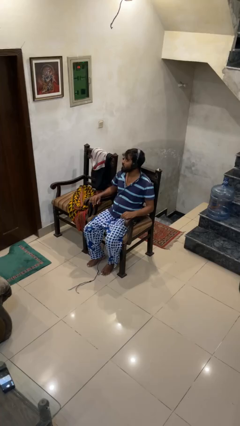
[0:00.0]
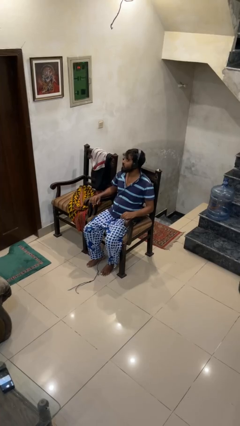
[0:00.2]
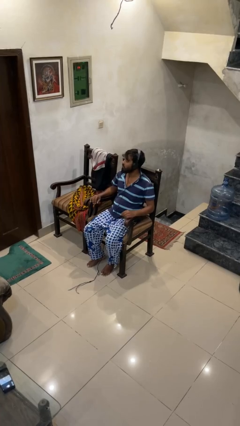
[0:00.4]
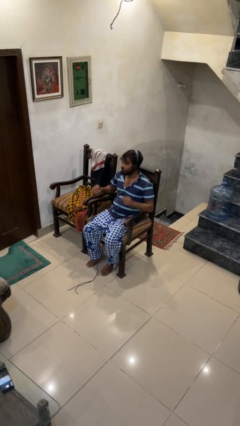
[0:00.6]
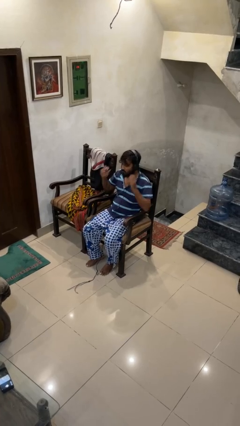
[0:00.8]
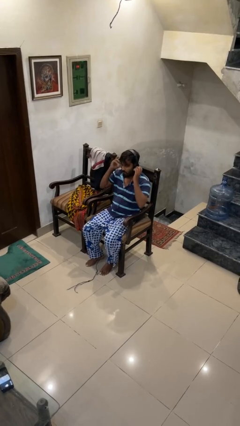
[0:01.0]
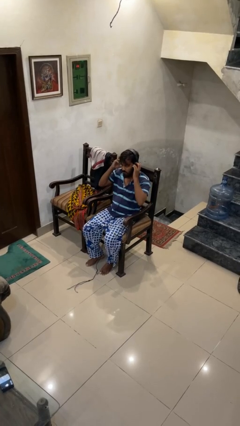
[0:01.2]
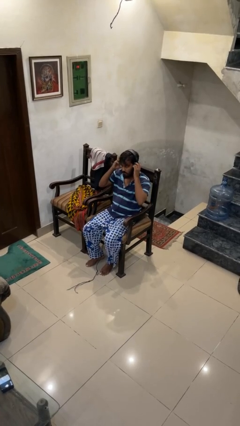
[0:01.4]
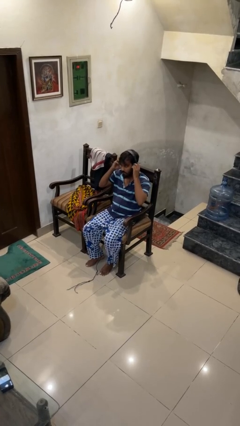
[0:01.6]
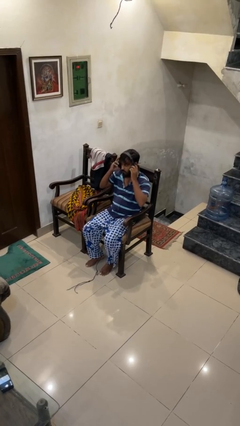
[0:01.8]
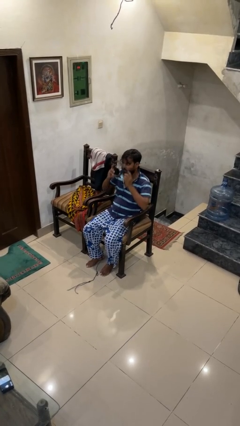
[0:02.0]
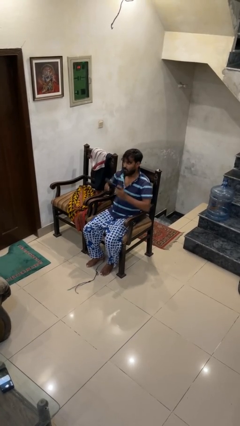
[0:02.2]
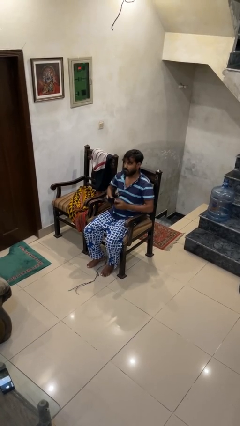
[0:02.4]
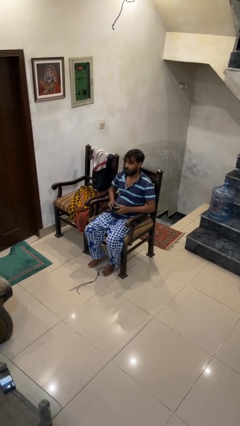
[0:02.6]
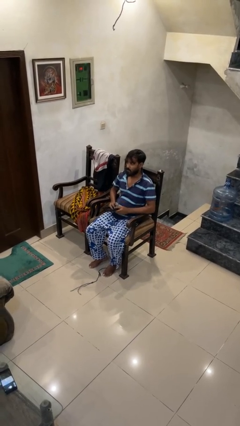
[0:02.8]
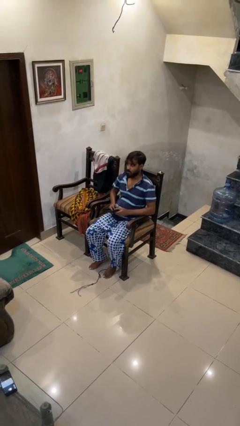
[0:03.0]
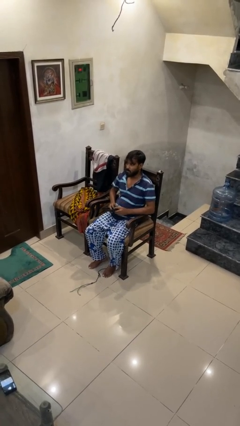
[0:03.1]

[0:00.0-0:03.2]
person takes off headphones

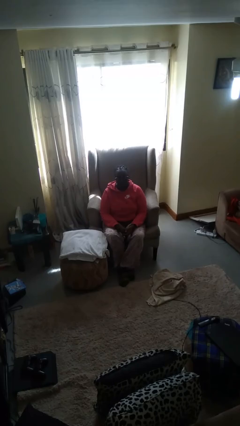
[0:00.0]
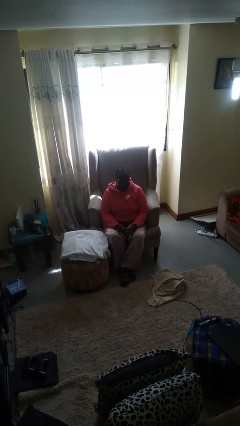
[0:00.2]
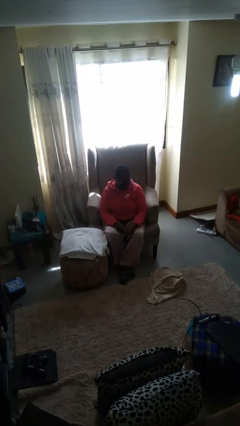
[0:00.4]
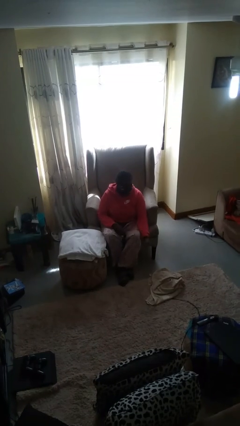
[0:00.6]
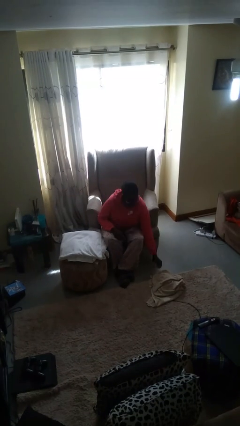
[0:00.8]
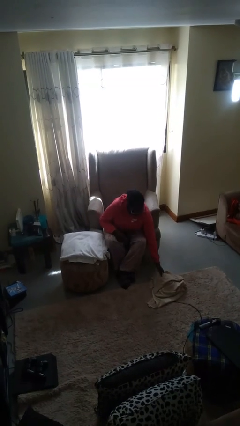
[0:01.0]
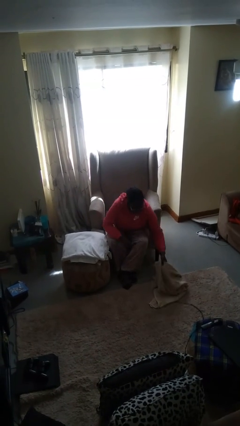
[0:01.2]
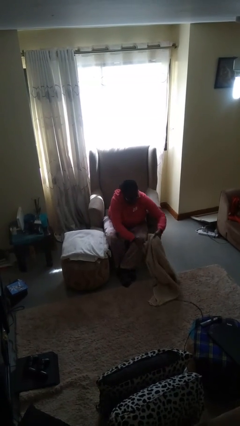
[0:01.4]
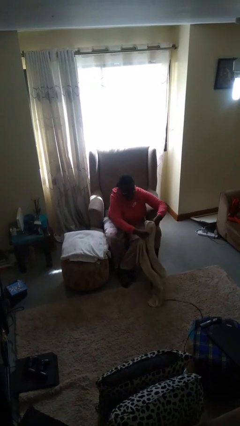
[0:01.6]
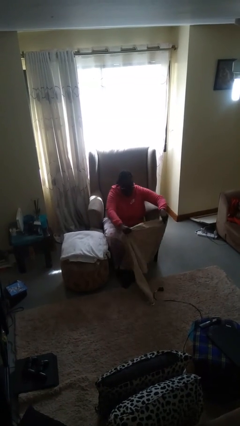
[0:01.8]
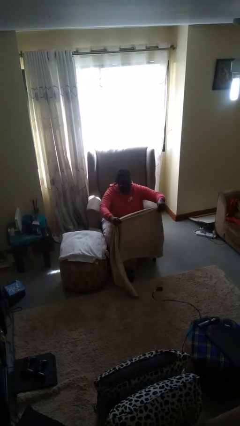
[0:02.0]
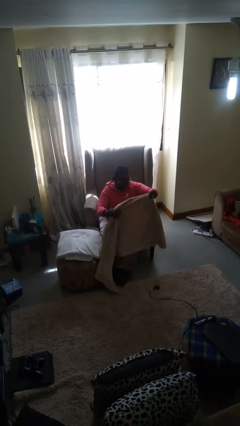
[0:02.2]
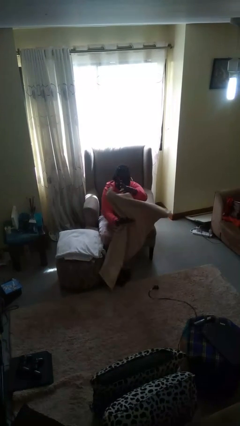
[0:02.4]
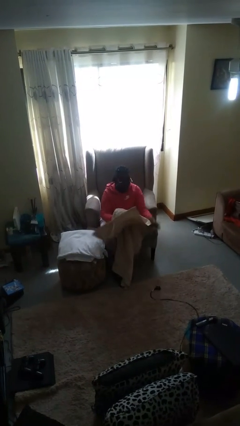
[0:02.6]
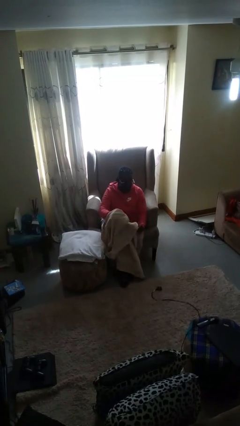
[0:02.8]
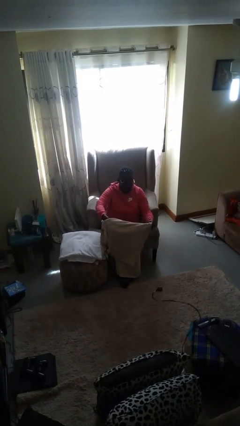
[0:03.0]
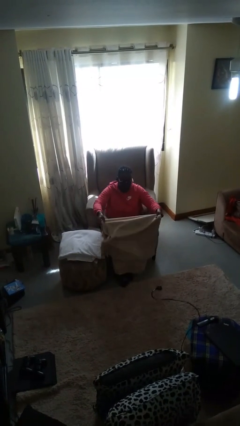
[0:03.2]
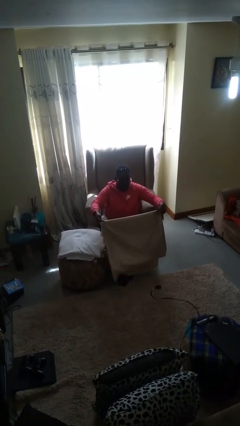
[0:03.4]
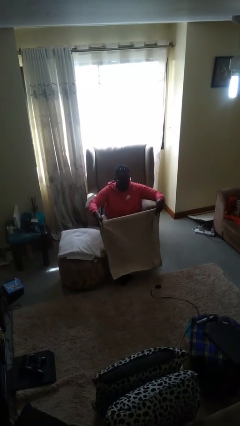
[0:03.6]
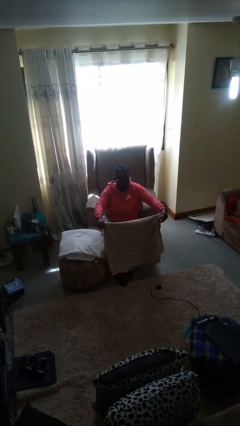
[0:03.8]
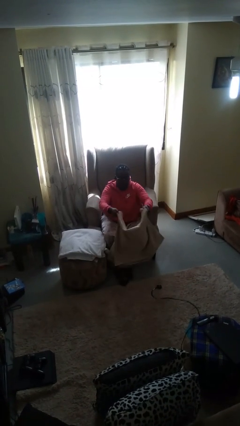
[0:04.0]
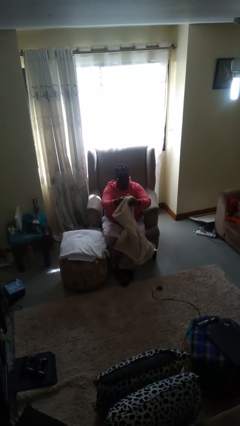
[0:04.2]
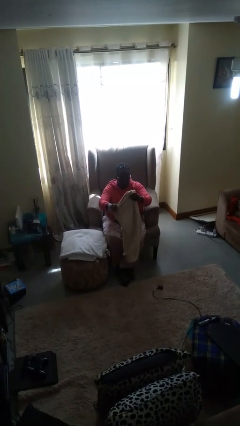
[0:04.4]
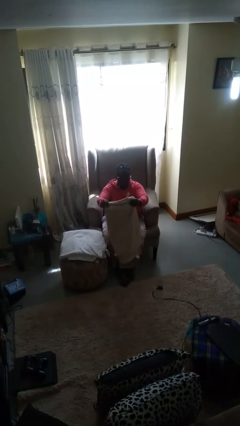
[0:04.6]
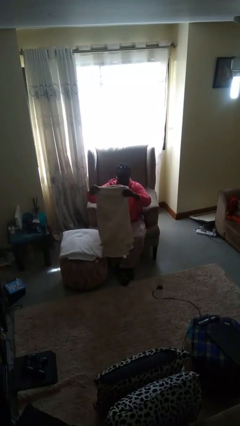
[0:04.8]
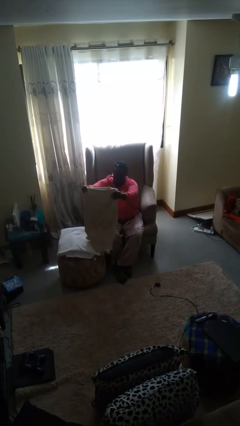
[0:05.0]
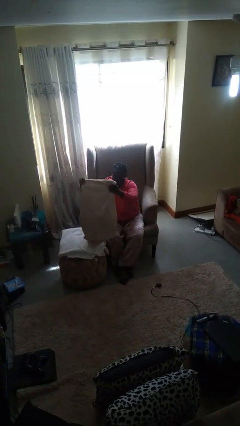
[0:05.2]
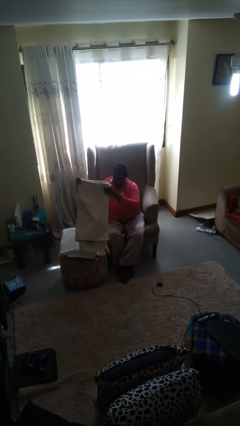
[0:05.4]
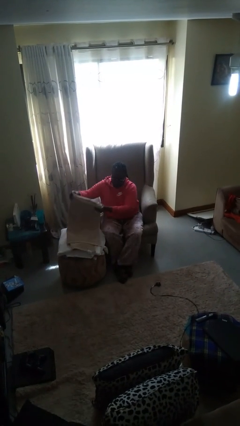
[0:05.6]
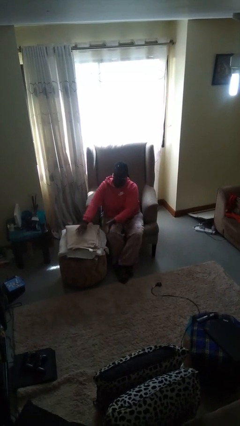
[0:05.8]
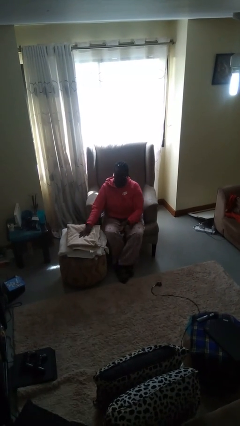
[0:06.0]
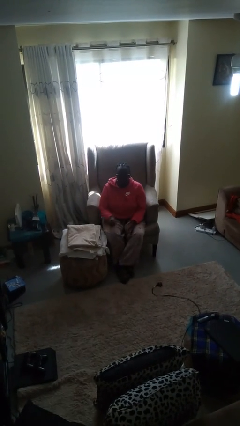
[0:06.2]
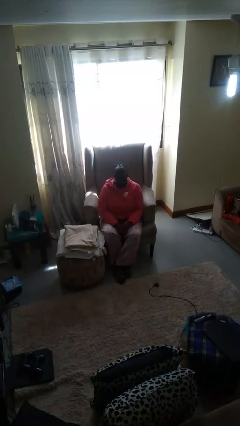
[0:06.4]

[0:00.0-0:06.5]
person folds towel

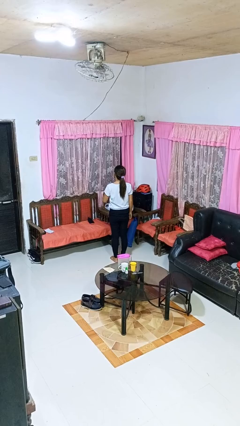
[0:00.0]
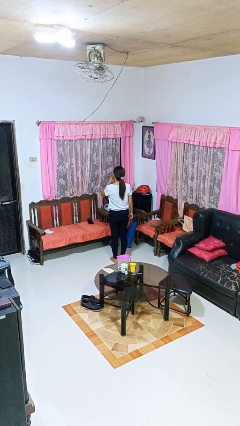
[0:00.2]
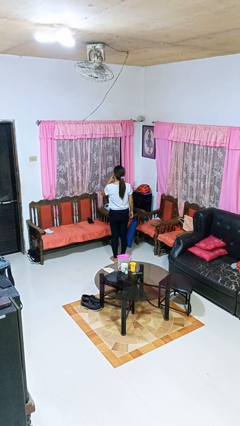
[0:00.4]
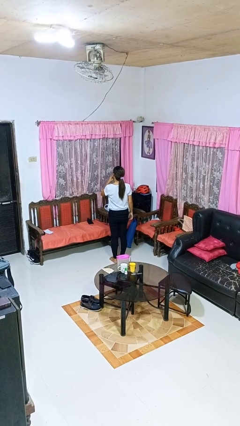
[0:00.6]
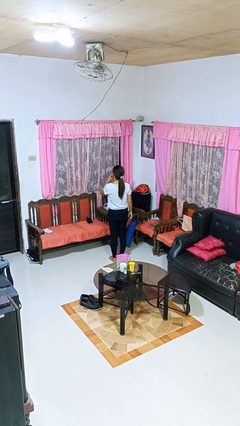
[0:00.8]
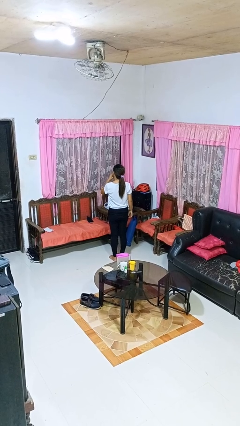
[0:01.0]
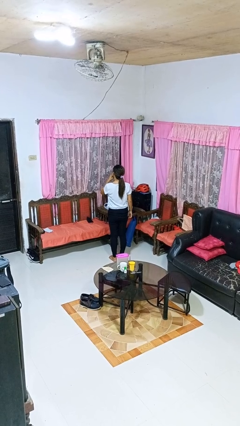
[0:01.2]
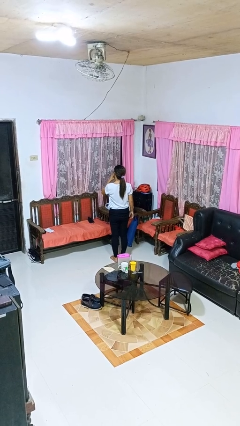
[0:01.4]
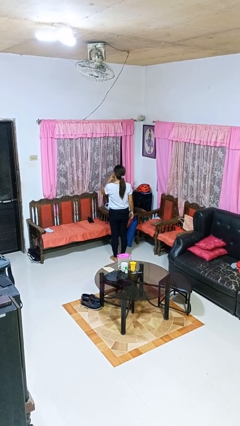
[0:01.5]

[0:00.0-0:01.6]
person gestures be quiet

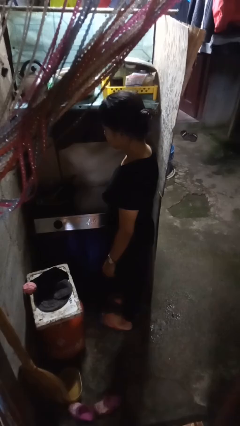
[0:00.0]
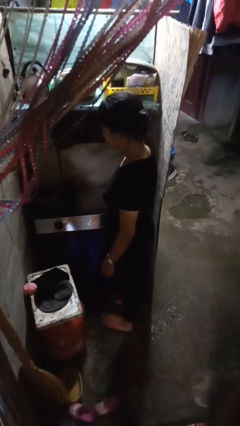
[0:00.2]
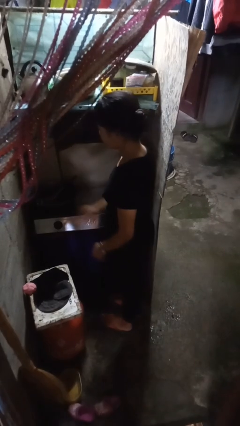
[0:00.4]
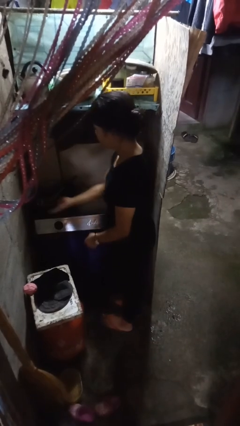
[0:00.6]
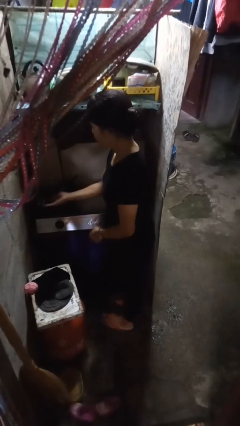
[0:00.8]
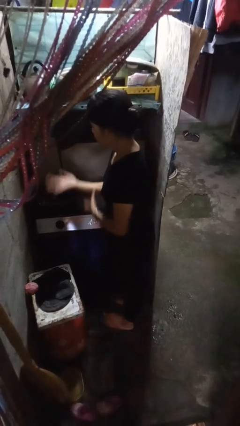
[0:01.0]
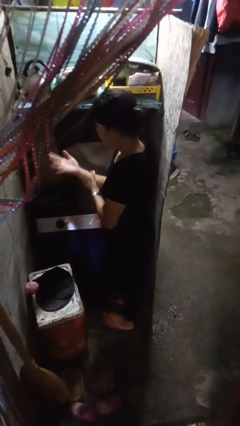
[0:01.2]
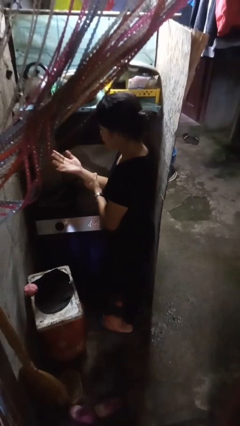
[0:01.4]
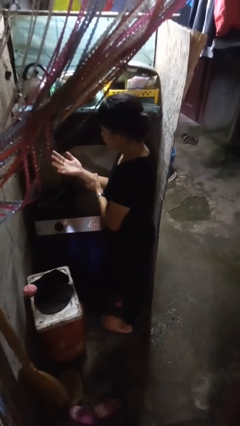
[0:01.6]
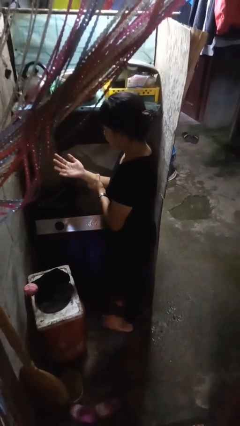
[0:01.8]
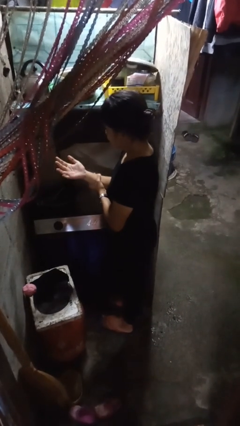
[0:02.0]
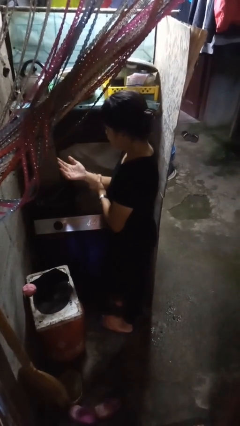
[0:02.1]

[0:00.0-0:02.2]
person burns hand

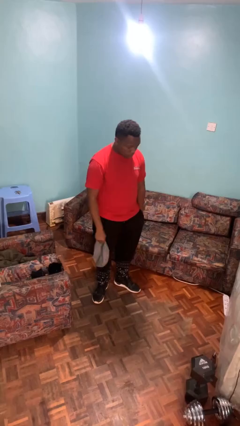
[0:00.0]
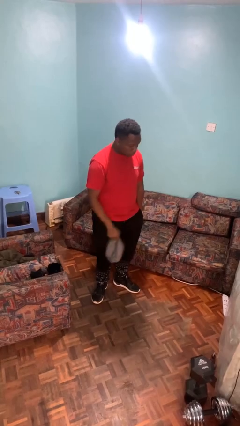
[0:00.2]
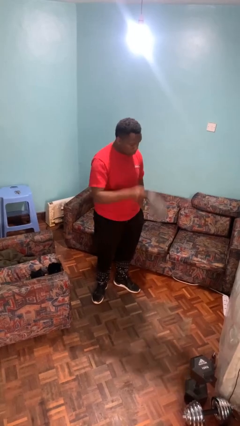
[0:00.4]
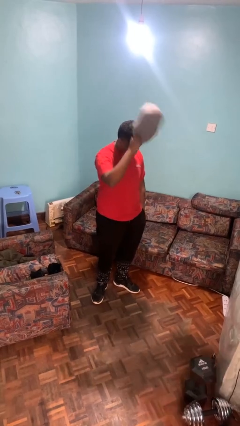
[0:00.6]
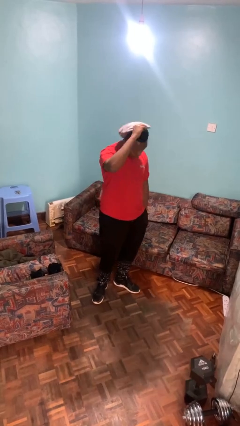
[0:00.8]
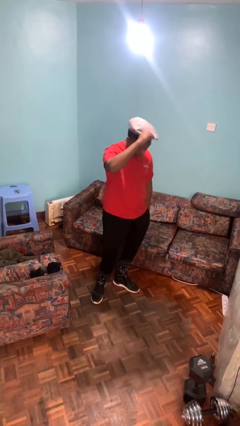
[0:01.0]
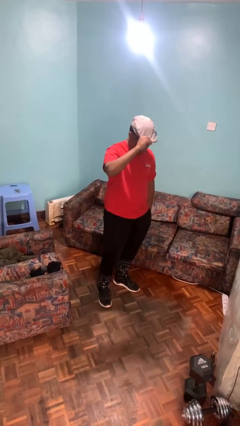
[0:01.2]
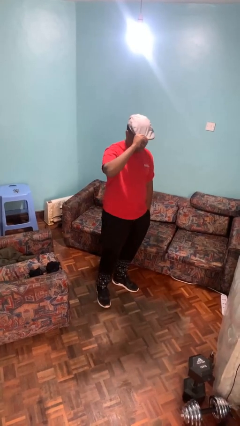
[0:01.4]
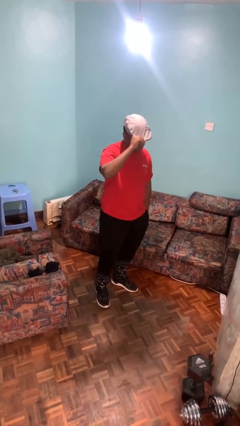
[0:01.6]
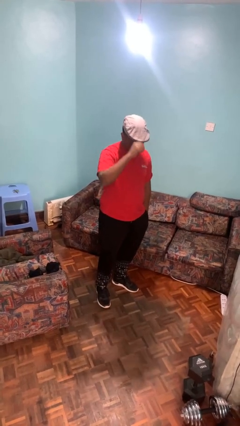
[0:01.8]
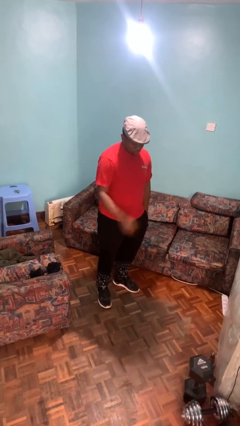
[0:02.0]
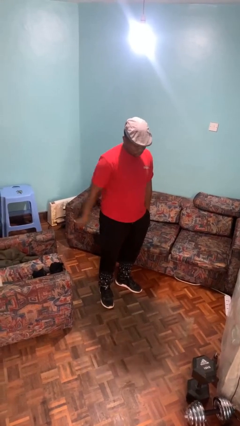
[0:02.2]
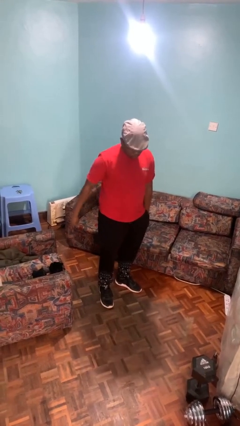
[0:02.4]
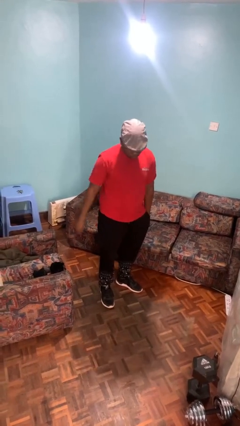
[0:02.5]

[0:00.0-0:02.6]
person puts on hat

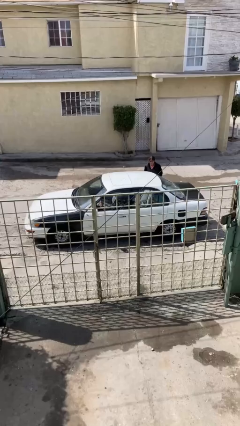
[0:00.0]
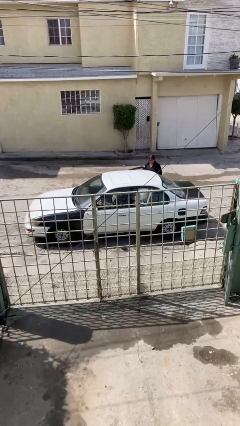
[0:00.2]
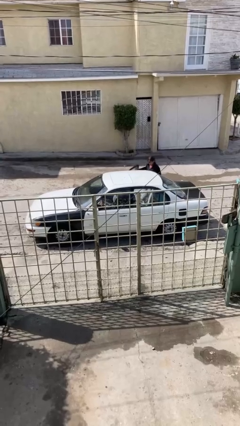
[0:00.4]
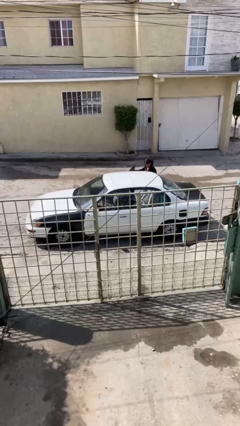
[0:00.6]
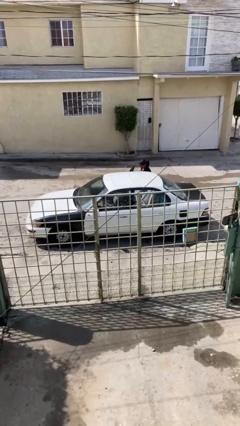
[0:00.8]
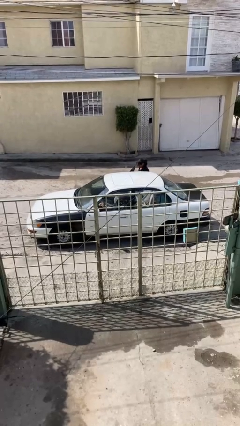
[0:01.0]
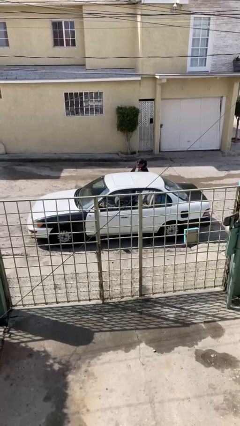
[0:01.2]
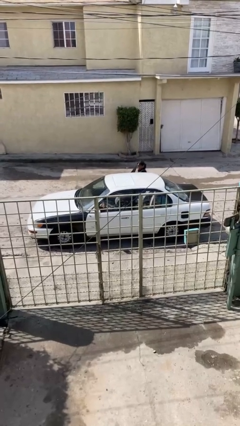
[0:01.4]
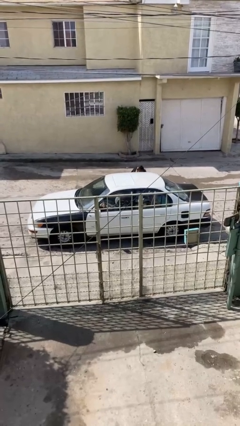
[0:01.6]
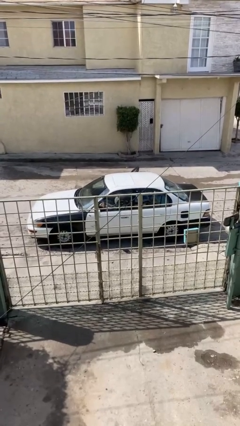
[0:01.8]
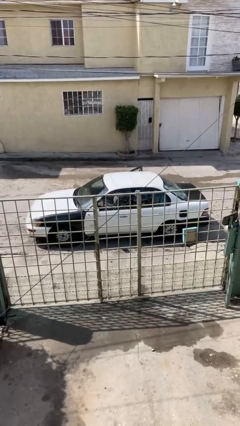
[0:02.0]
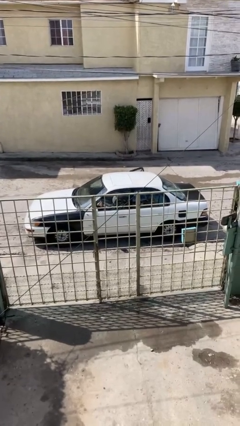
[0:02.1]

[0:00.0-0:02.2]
car picks up person
